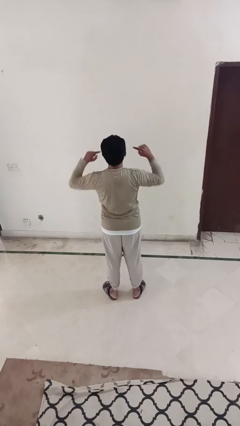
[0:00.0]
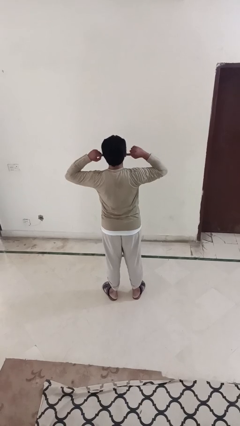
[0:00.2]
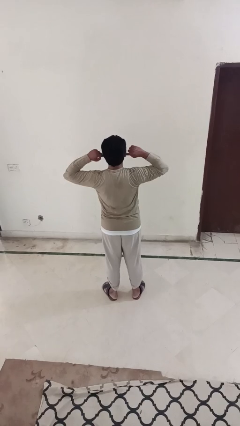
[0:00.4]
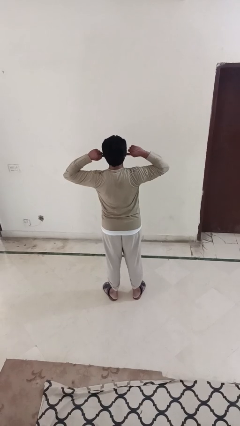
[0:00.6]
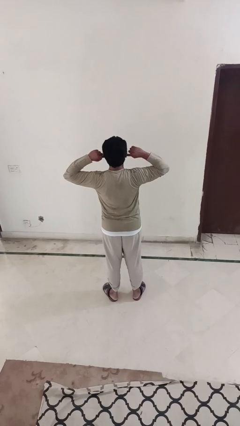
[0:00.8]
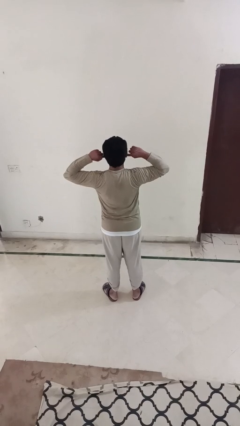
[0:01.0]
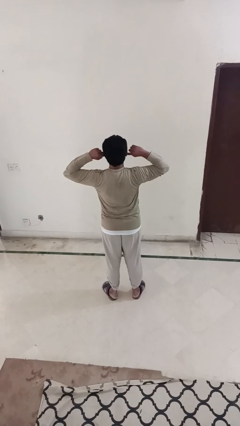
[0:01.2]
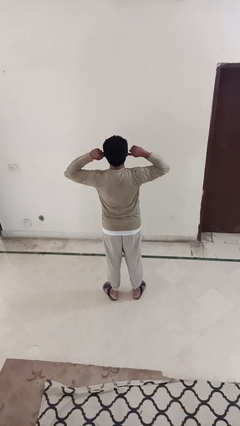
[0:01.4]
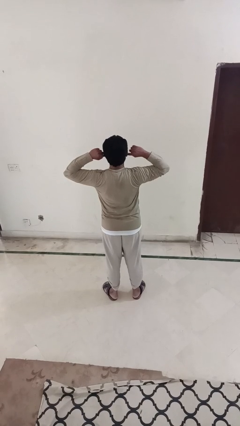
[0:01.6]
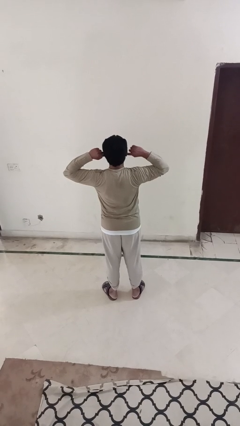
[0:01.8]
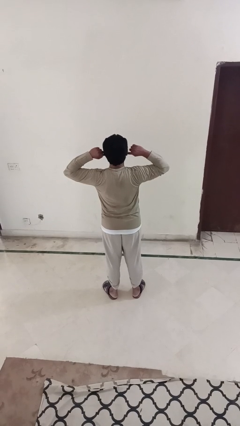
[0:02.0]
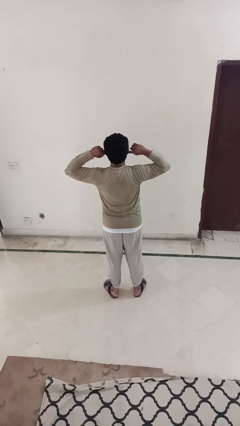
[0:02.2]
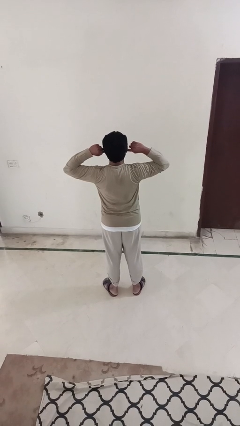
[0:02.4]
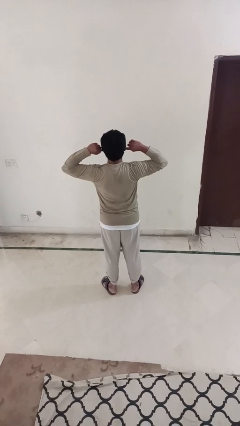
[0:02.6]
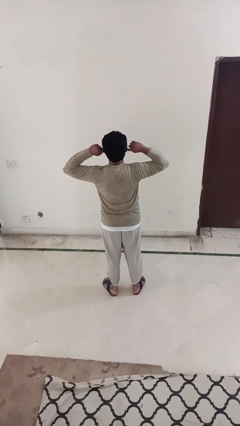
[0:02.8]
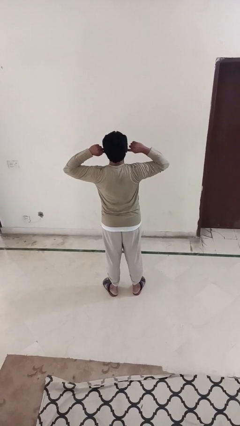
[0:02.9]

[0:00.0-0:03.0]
person puts fingers in ear

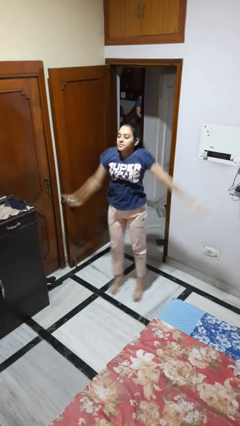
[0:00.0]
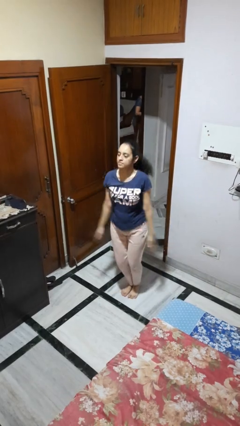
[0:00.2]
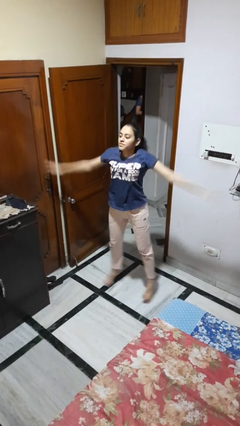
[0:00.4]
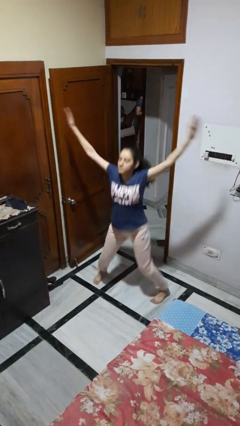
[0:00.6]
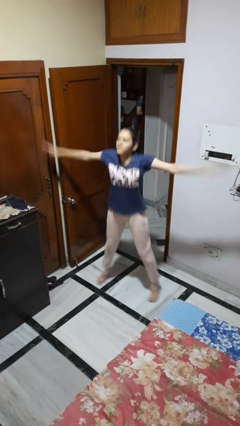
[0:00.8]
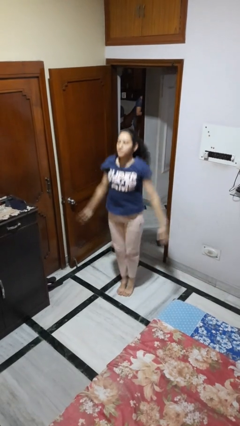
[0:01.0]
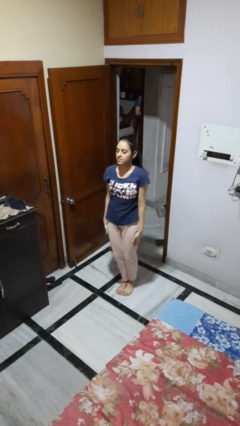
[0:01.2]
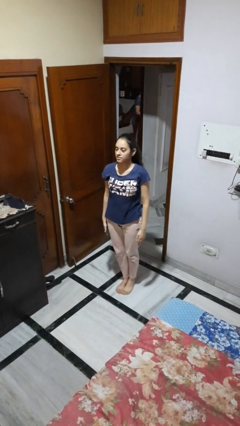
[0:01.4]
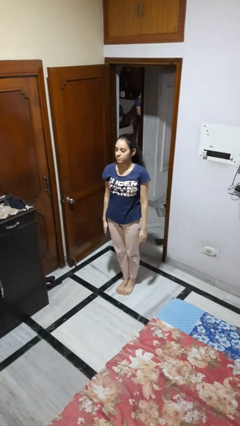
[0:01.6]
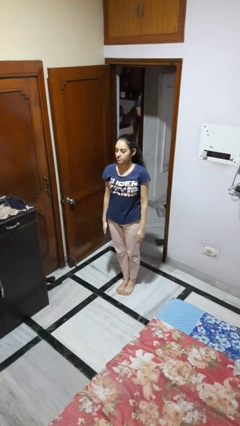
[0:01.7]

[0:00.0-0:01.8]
person exercises with jumping jacks

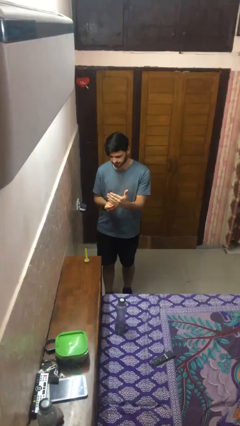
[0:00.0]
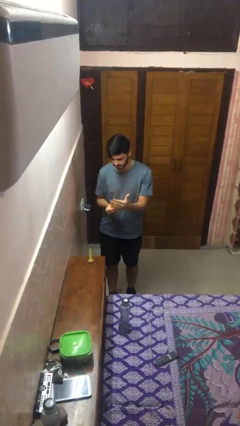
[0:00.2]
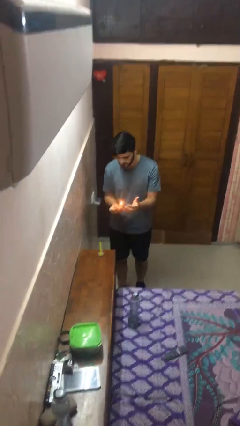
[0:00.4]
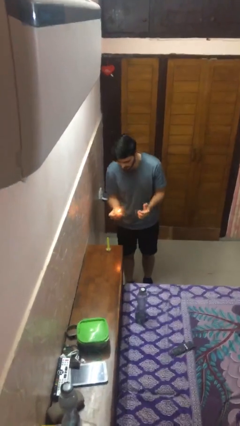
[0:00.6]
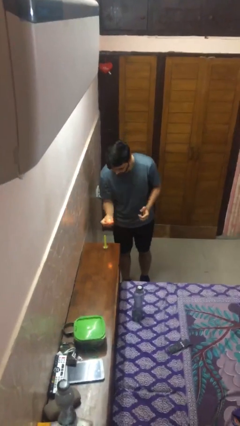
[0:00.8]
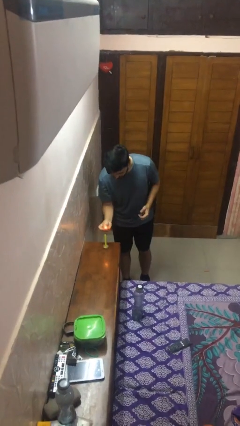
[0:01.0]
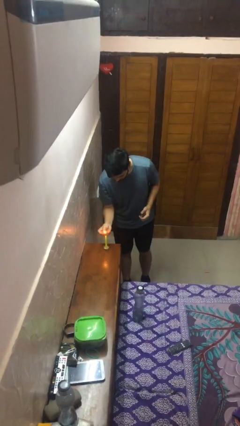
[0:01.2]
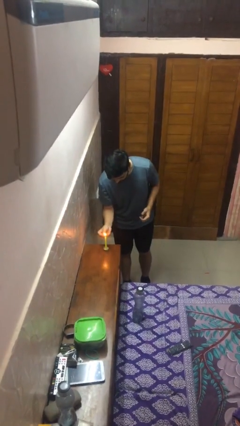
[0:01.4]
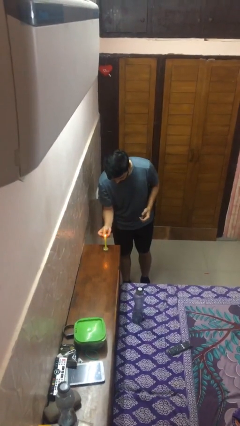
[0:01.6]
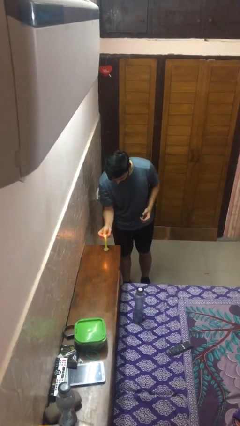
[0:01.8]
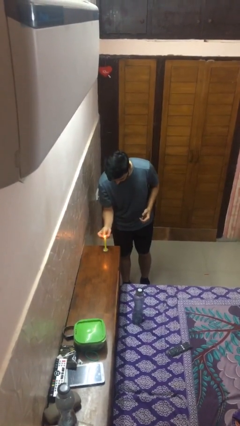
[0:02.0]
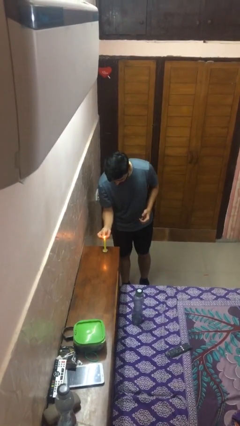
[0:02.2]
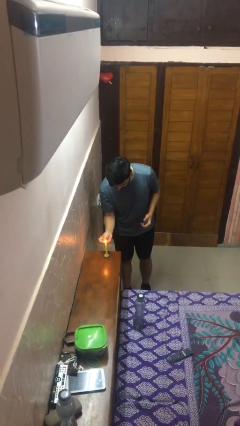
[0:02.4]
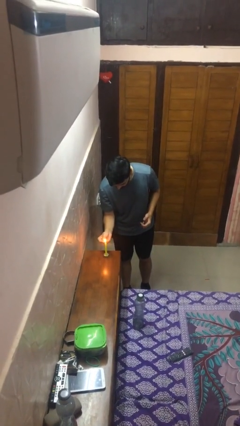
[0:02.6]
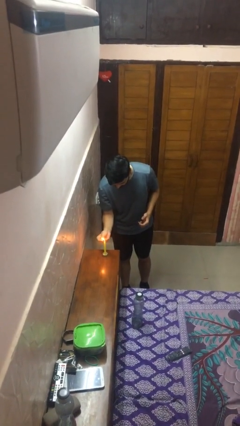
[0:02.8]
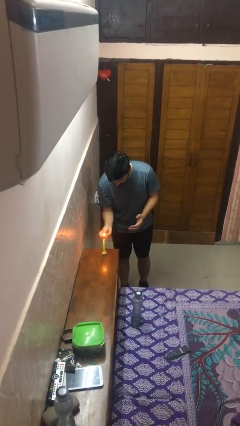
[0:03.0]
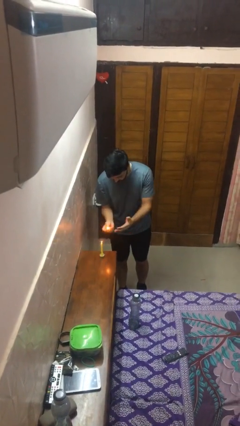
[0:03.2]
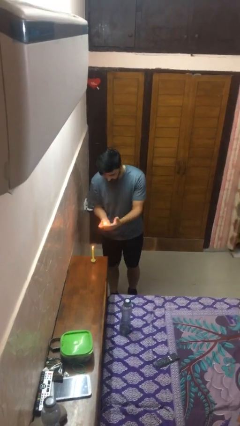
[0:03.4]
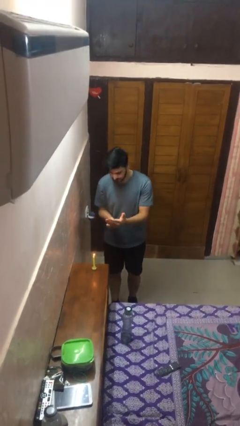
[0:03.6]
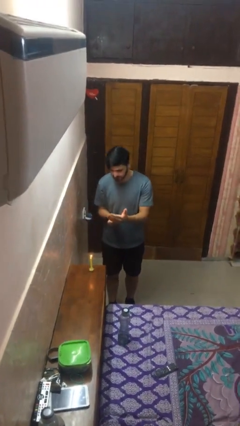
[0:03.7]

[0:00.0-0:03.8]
person lights candle

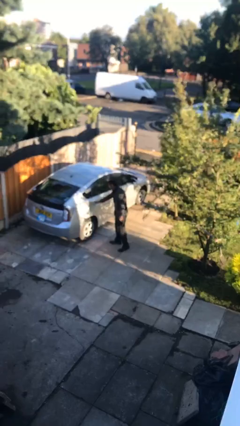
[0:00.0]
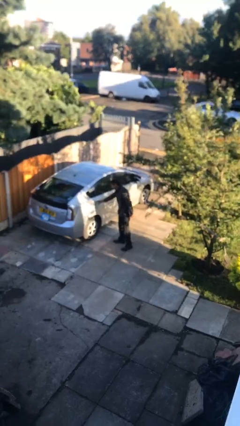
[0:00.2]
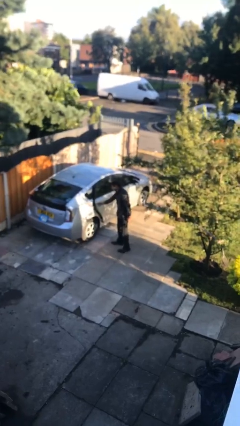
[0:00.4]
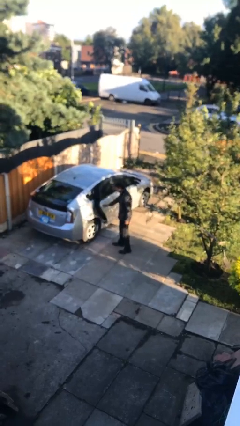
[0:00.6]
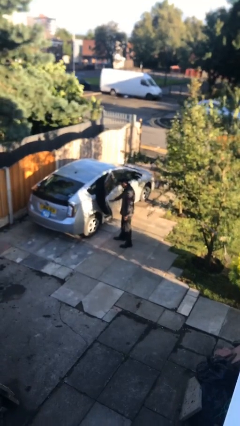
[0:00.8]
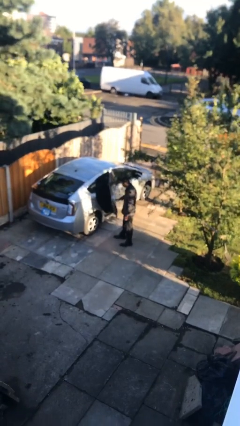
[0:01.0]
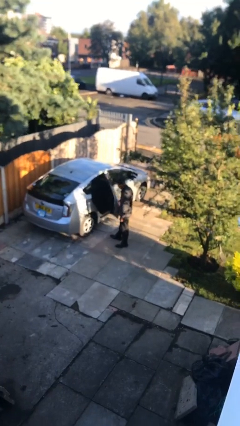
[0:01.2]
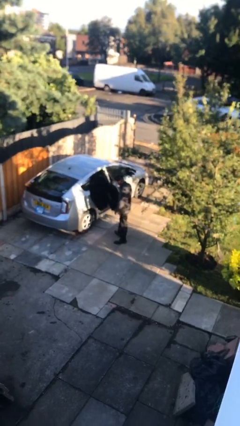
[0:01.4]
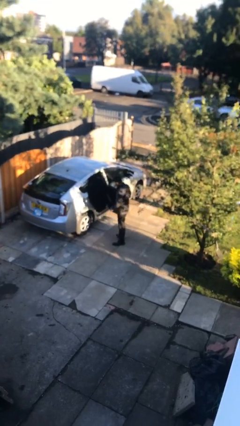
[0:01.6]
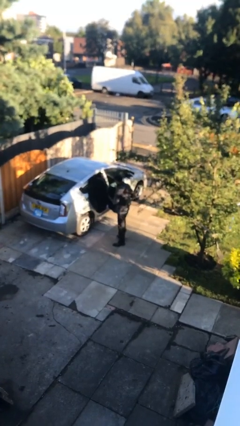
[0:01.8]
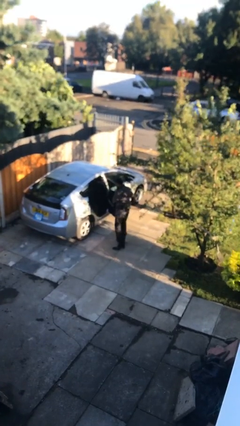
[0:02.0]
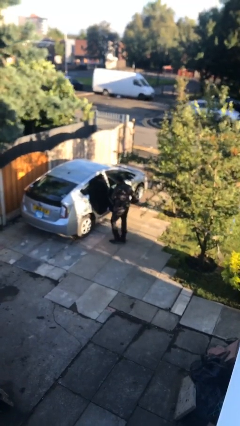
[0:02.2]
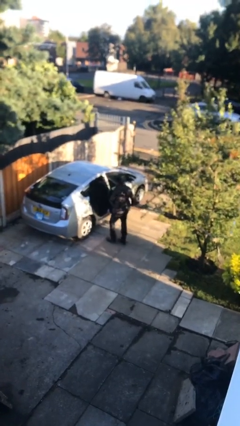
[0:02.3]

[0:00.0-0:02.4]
person opens car door

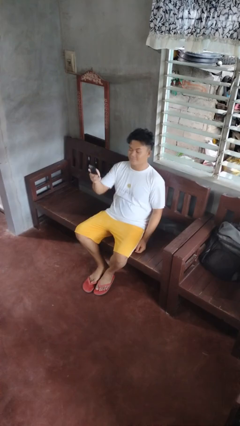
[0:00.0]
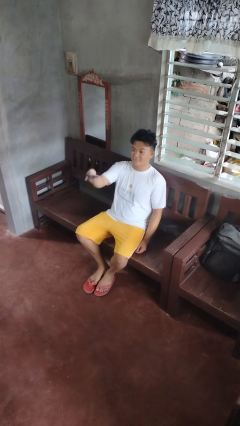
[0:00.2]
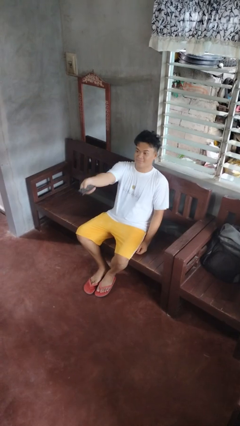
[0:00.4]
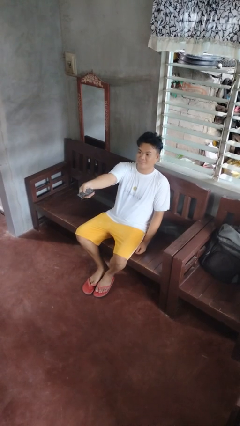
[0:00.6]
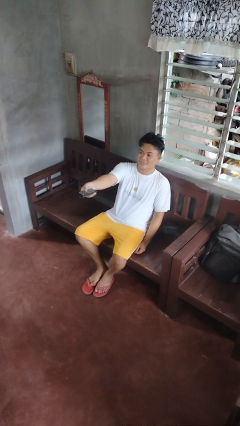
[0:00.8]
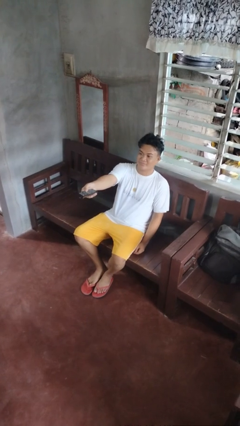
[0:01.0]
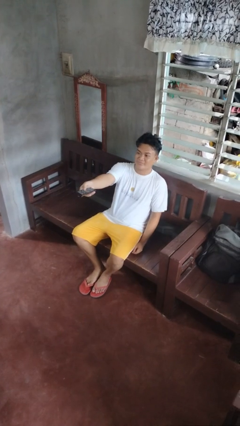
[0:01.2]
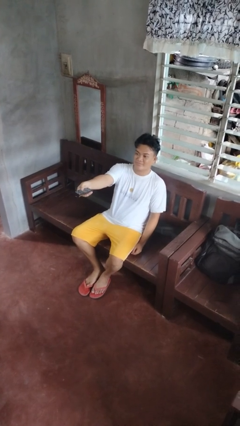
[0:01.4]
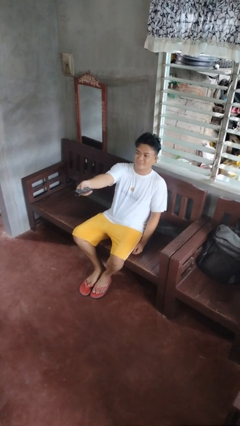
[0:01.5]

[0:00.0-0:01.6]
person uses television remote

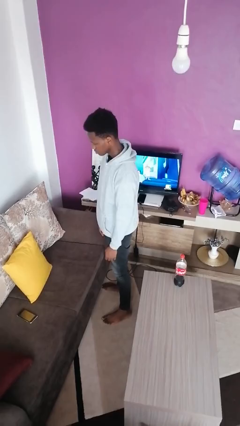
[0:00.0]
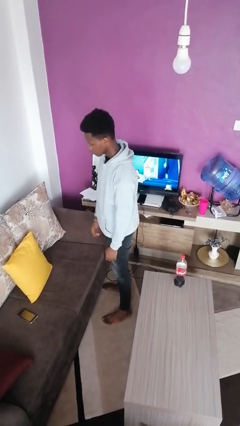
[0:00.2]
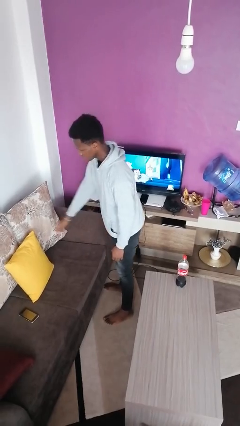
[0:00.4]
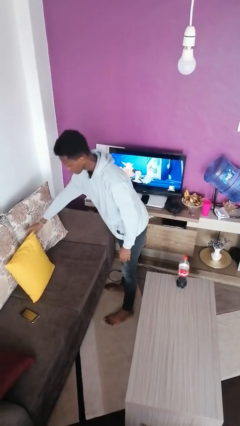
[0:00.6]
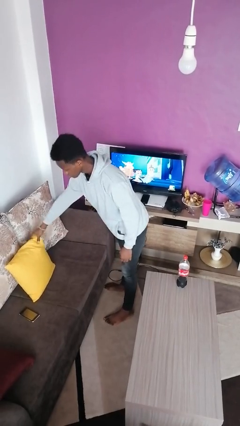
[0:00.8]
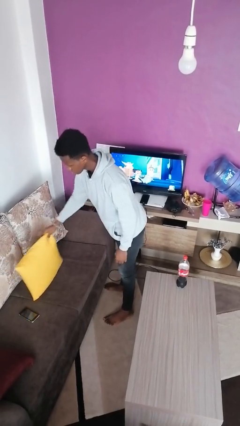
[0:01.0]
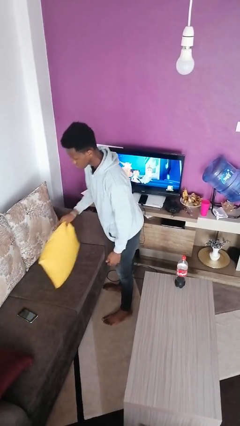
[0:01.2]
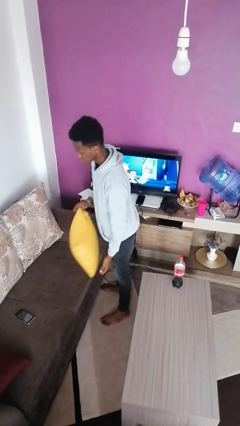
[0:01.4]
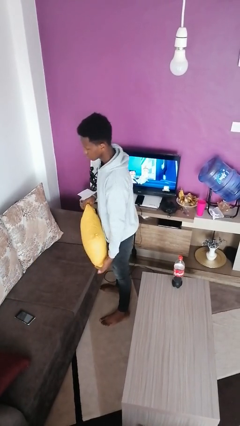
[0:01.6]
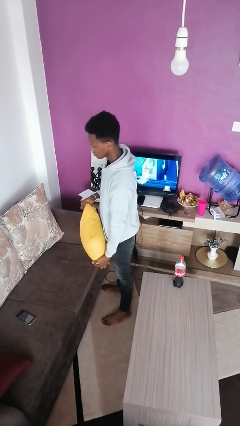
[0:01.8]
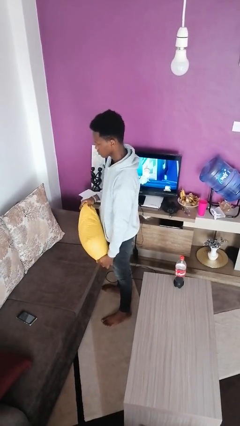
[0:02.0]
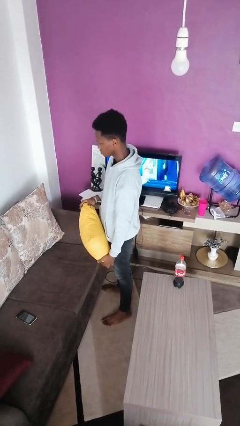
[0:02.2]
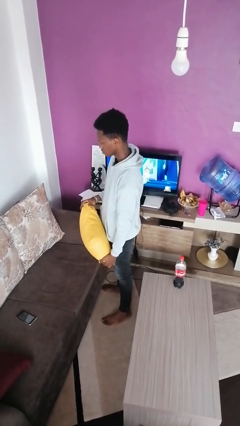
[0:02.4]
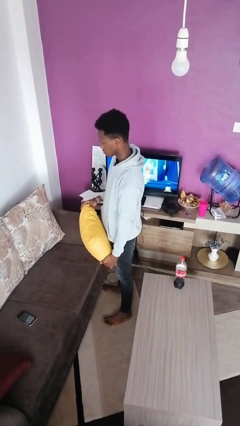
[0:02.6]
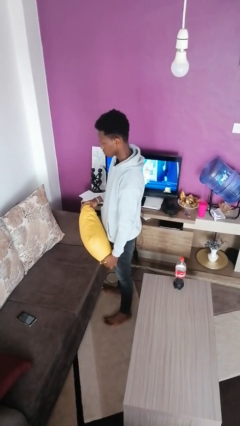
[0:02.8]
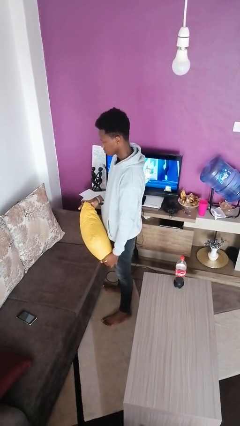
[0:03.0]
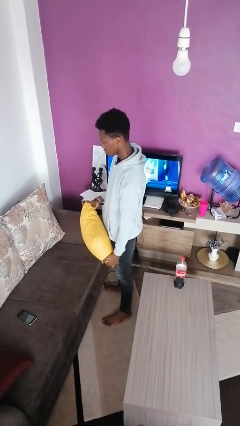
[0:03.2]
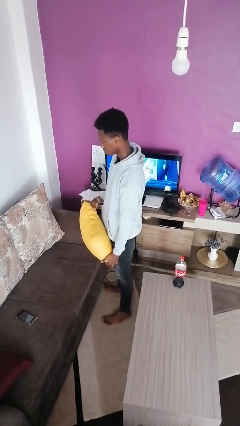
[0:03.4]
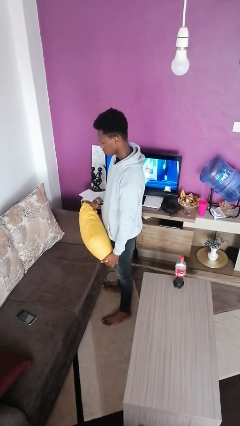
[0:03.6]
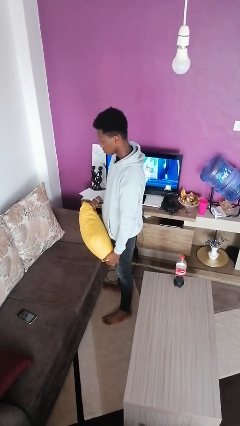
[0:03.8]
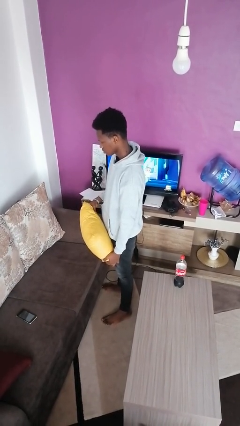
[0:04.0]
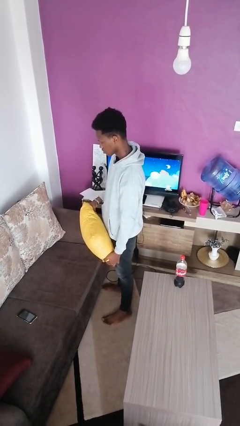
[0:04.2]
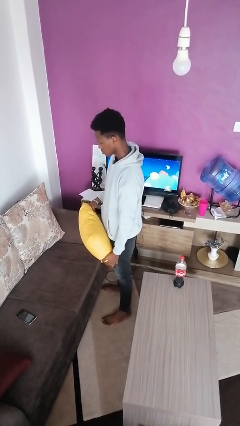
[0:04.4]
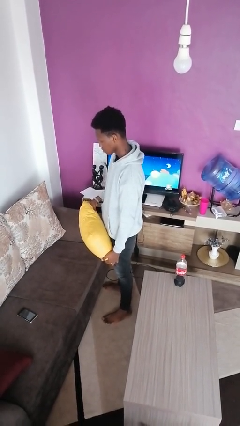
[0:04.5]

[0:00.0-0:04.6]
person picks up object from couch
